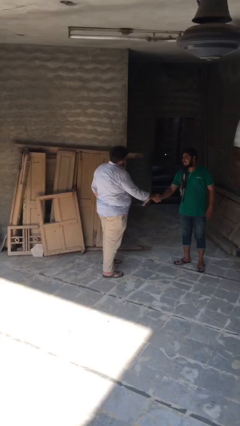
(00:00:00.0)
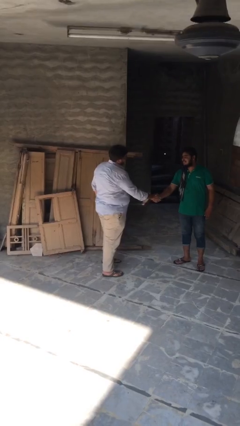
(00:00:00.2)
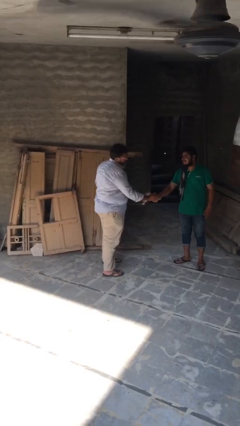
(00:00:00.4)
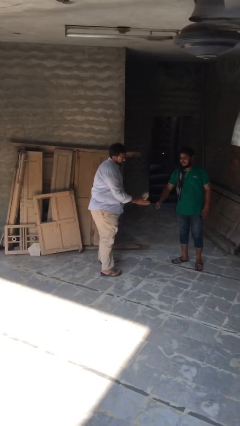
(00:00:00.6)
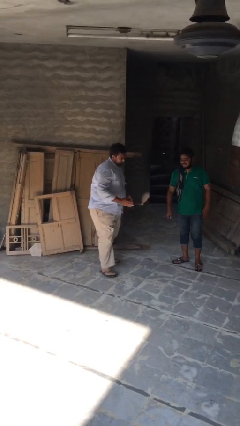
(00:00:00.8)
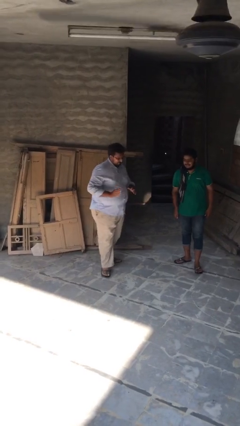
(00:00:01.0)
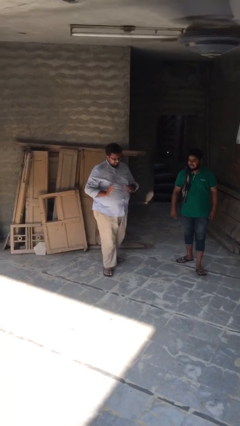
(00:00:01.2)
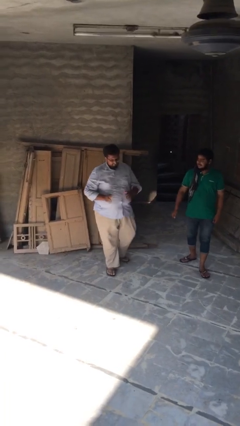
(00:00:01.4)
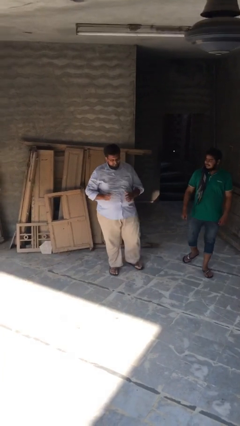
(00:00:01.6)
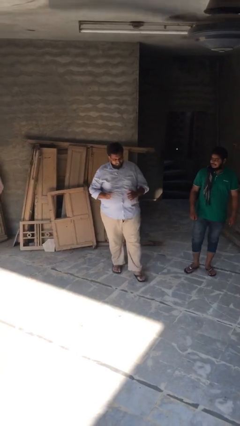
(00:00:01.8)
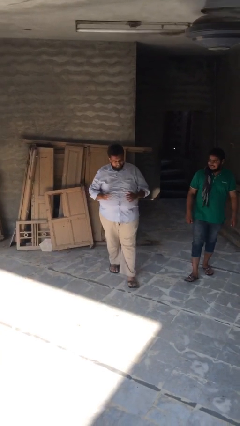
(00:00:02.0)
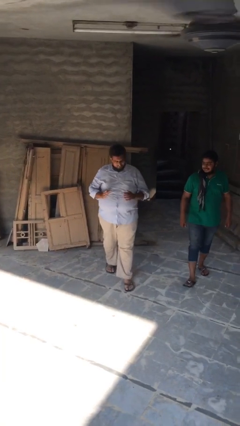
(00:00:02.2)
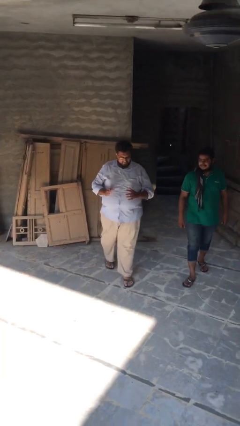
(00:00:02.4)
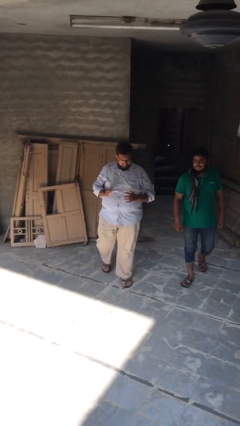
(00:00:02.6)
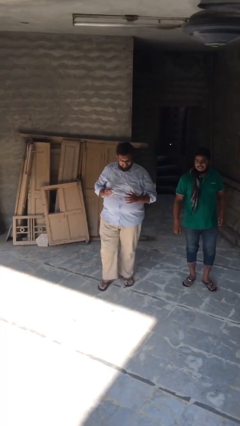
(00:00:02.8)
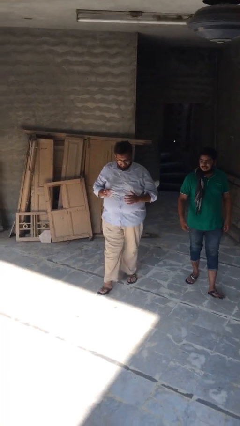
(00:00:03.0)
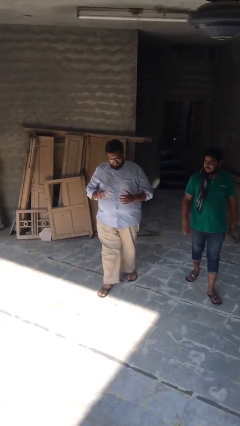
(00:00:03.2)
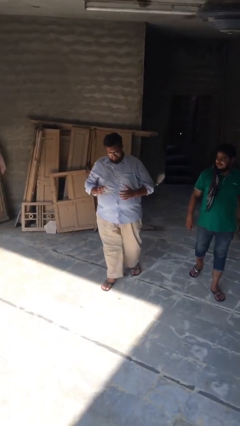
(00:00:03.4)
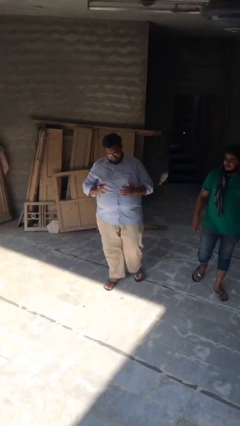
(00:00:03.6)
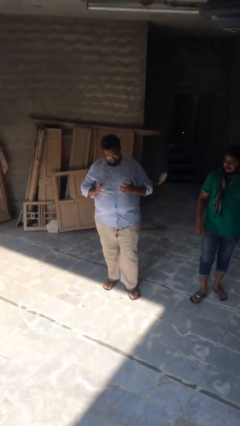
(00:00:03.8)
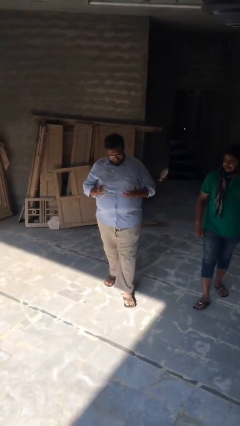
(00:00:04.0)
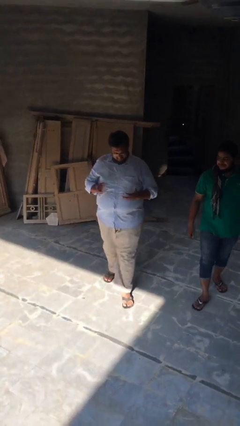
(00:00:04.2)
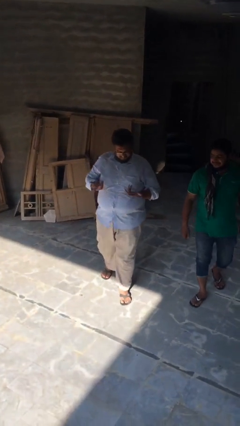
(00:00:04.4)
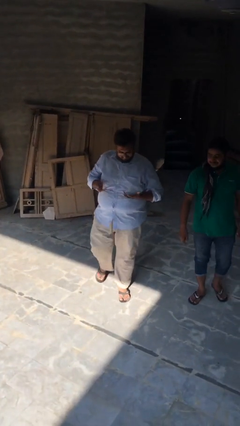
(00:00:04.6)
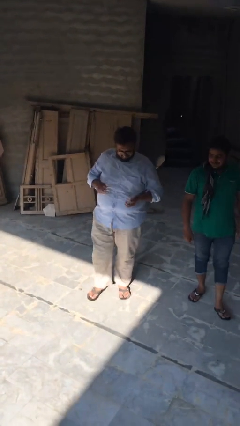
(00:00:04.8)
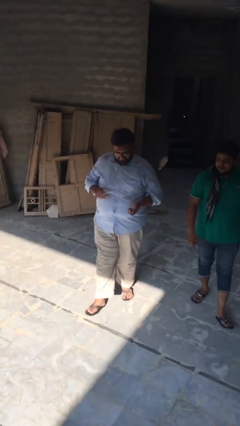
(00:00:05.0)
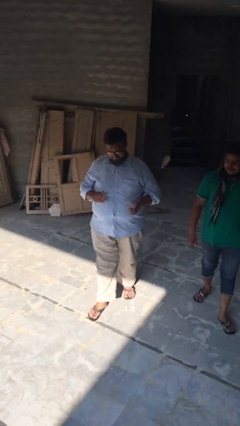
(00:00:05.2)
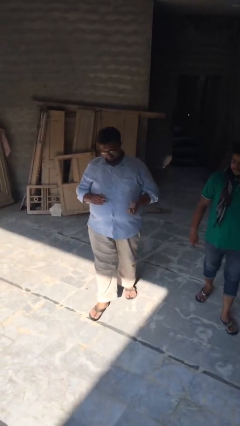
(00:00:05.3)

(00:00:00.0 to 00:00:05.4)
person talks to person

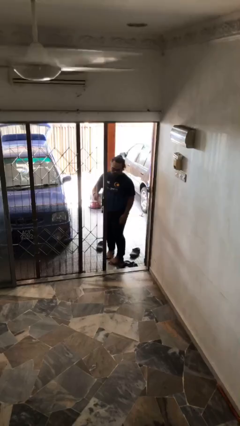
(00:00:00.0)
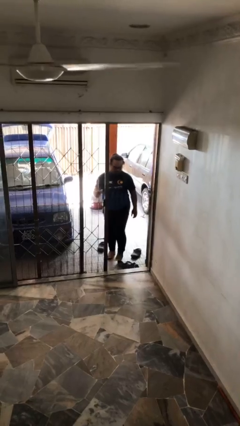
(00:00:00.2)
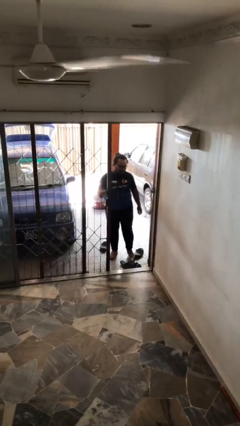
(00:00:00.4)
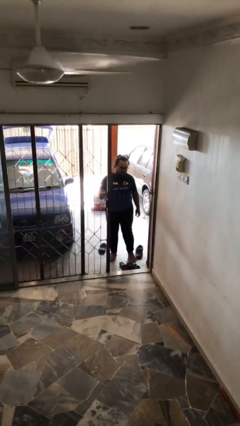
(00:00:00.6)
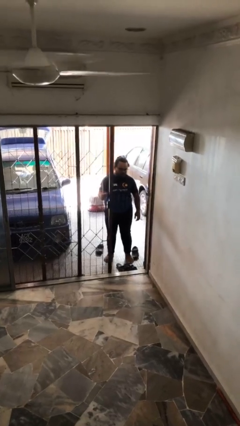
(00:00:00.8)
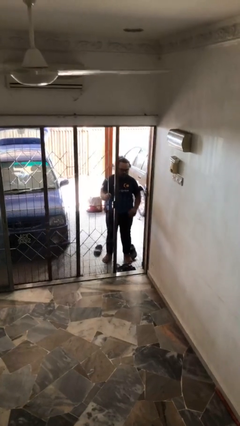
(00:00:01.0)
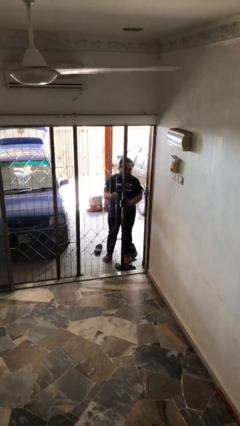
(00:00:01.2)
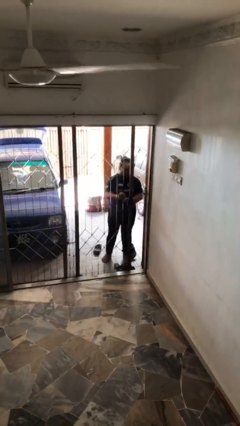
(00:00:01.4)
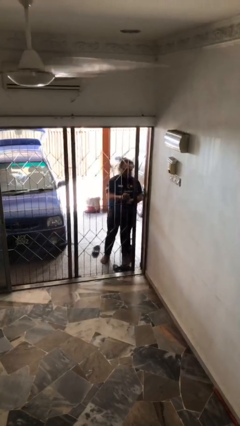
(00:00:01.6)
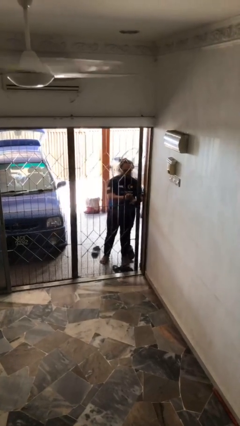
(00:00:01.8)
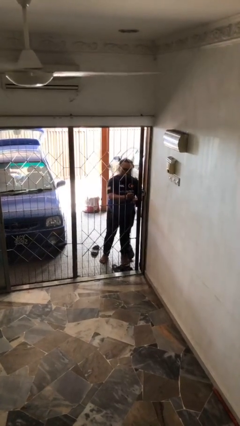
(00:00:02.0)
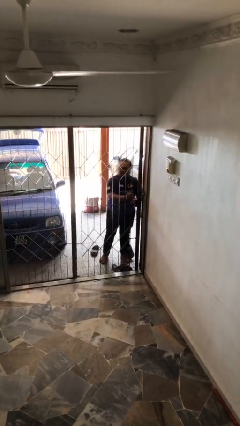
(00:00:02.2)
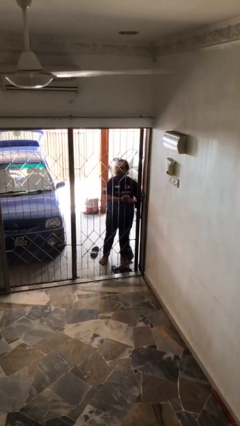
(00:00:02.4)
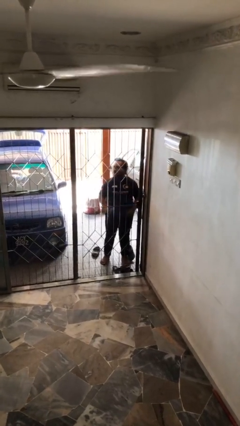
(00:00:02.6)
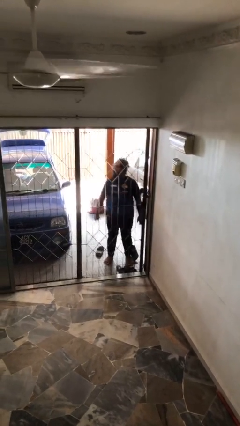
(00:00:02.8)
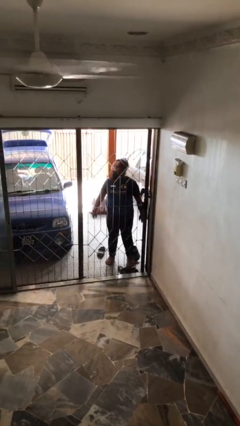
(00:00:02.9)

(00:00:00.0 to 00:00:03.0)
person closes facility door

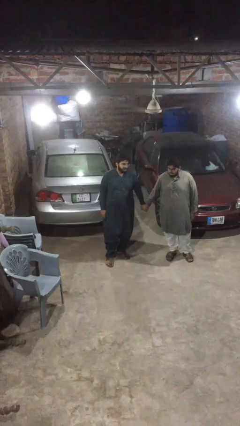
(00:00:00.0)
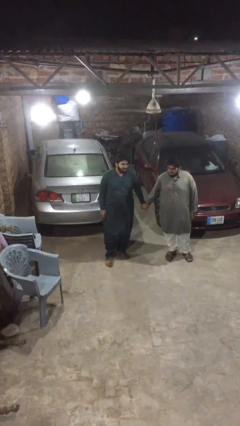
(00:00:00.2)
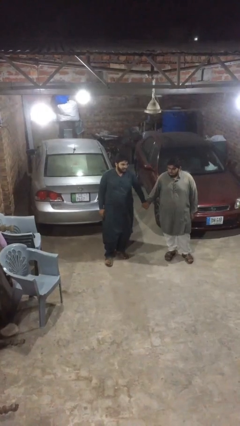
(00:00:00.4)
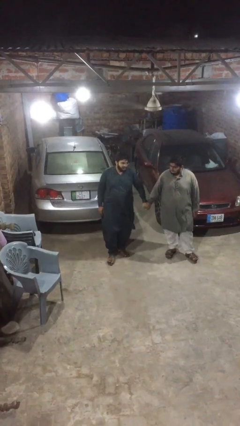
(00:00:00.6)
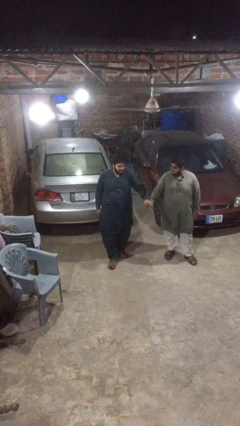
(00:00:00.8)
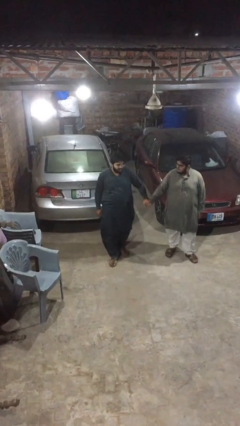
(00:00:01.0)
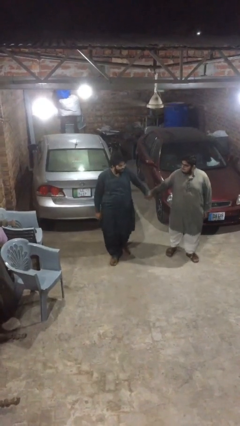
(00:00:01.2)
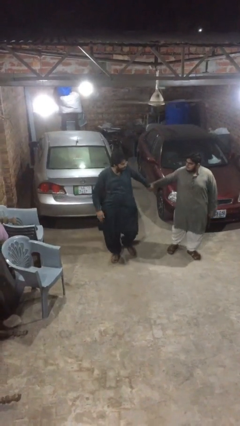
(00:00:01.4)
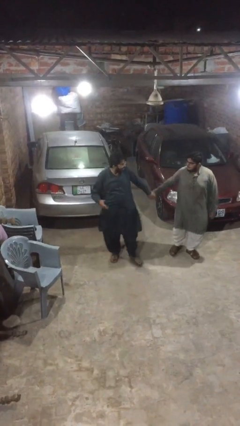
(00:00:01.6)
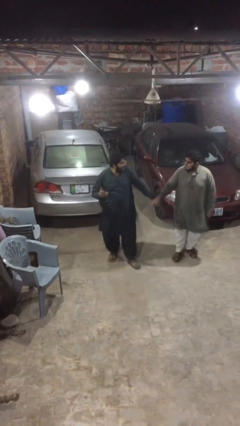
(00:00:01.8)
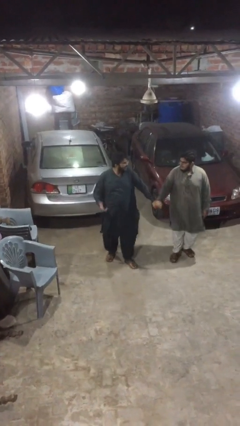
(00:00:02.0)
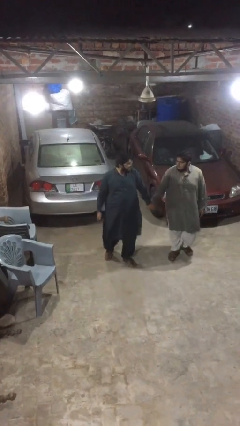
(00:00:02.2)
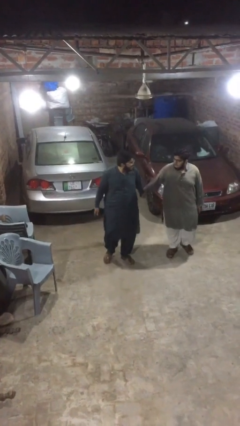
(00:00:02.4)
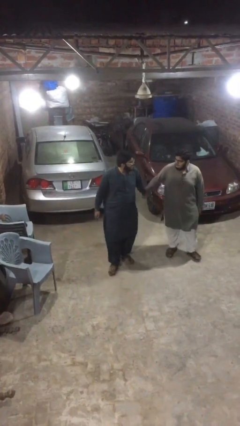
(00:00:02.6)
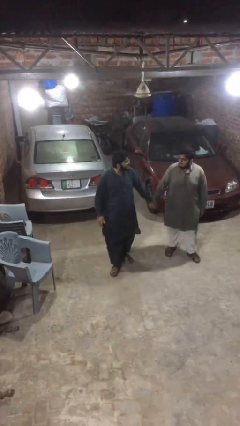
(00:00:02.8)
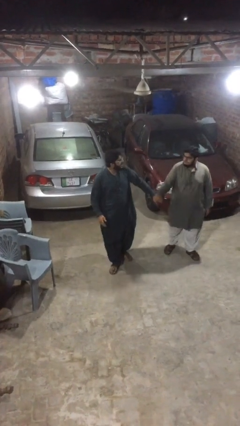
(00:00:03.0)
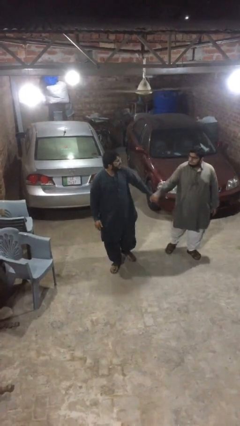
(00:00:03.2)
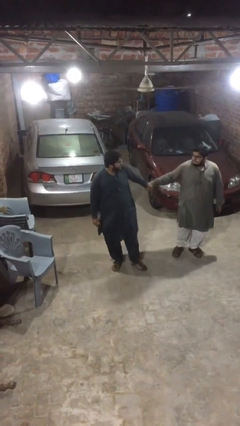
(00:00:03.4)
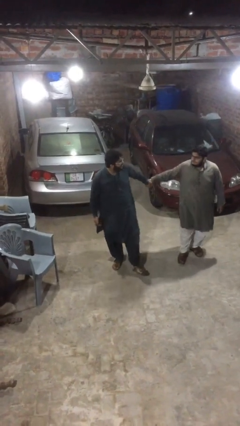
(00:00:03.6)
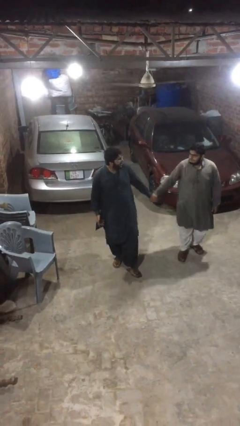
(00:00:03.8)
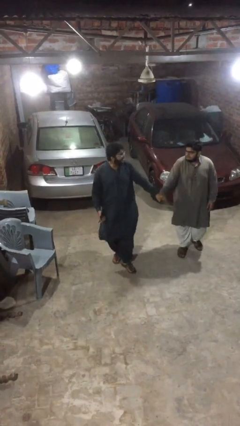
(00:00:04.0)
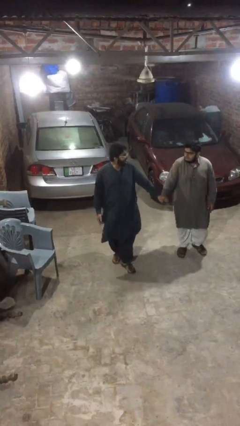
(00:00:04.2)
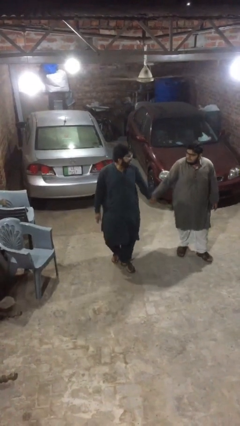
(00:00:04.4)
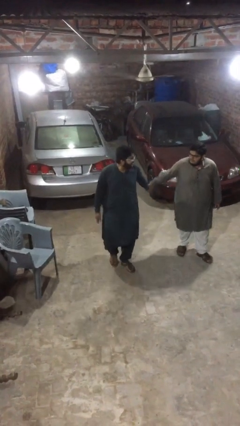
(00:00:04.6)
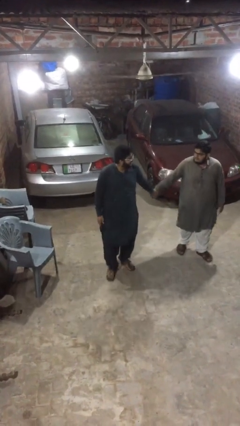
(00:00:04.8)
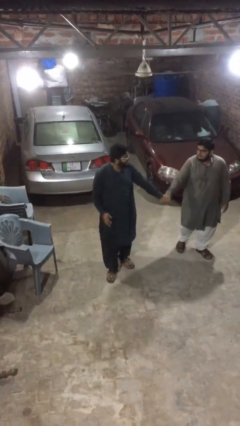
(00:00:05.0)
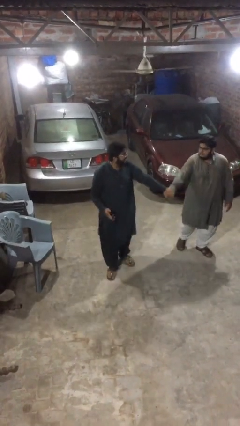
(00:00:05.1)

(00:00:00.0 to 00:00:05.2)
person holds hand

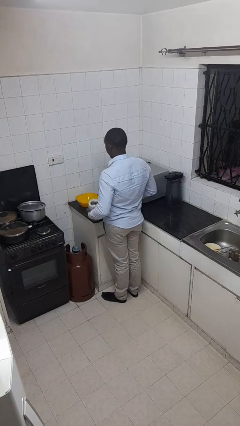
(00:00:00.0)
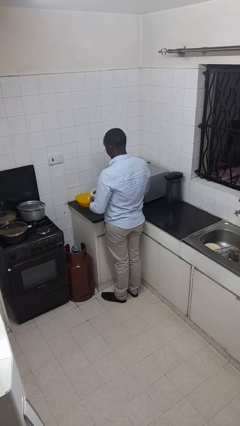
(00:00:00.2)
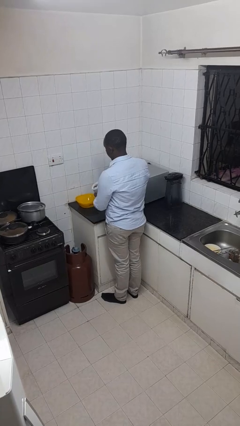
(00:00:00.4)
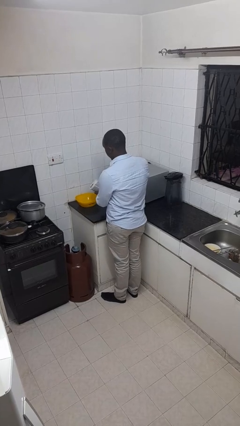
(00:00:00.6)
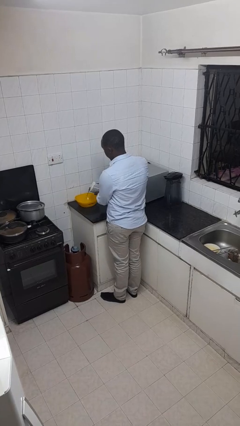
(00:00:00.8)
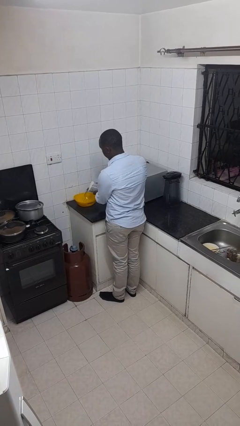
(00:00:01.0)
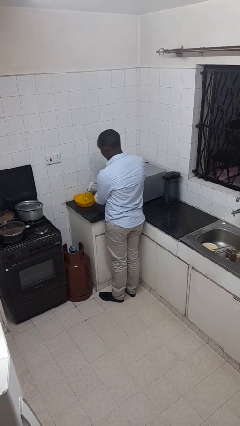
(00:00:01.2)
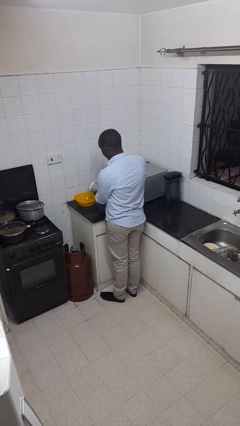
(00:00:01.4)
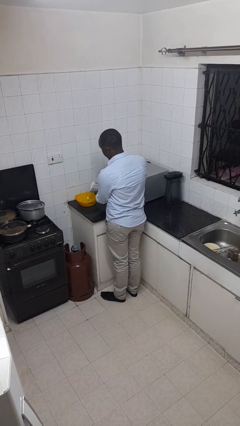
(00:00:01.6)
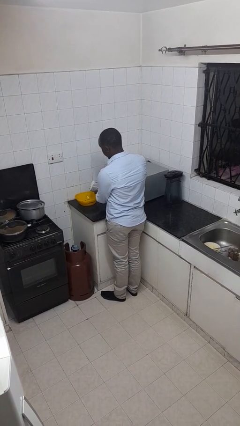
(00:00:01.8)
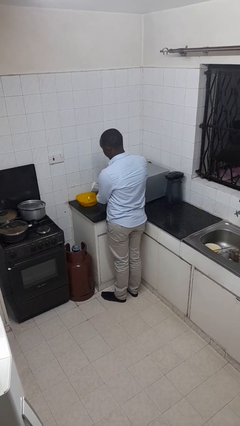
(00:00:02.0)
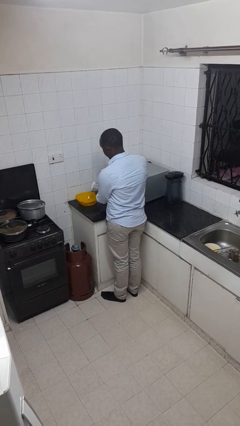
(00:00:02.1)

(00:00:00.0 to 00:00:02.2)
person pours into bowl

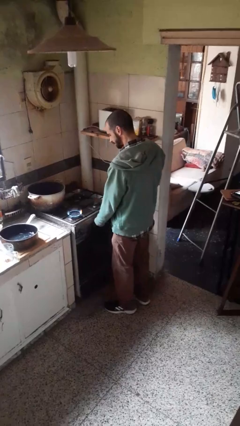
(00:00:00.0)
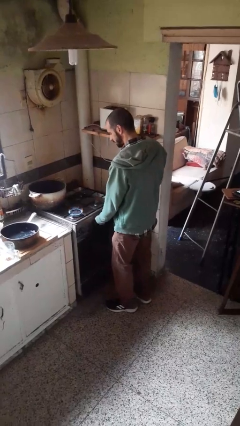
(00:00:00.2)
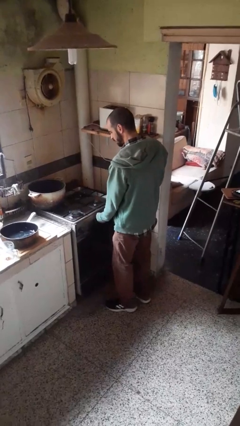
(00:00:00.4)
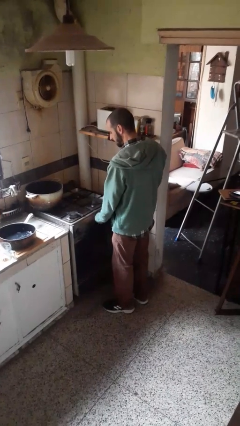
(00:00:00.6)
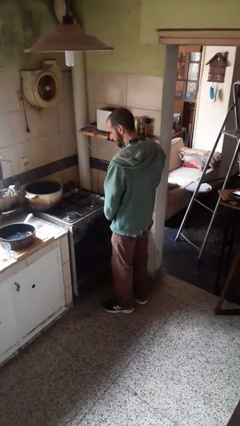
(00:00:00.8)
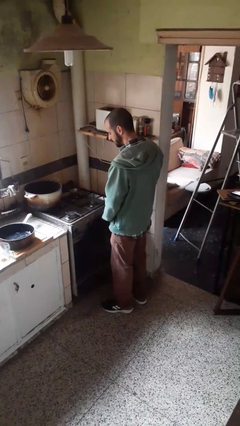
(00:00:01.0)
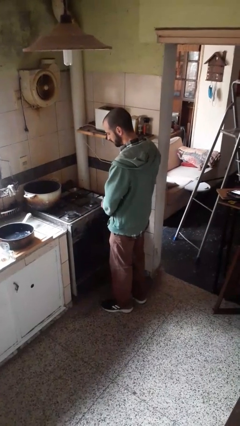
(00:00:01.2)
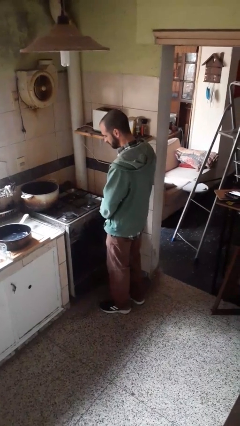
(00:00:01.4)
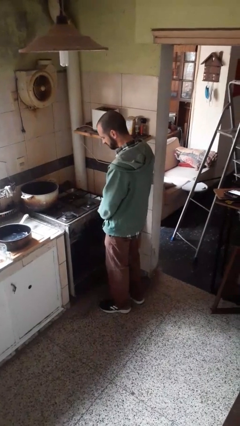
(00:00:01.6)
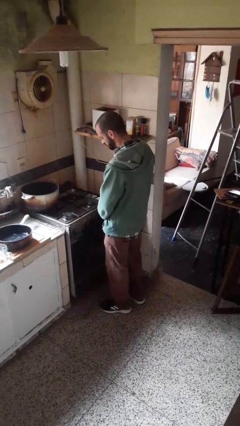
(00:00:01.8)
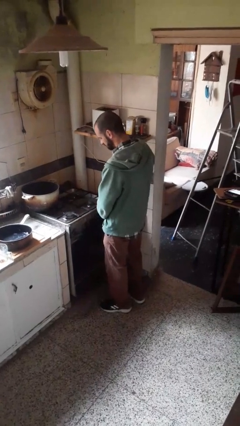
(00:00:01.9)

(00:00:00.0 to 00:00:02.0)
person turns off stovetop
